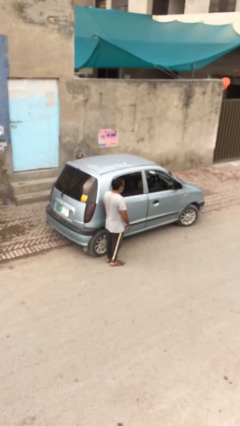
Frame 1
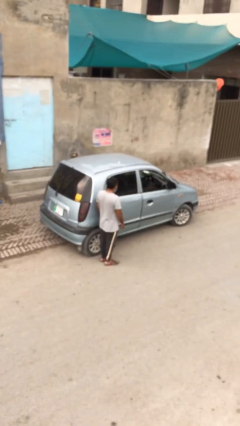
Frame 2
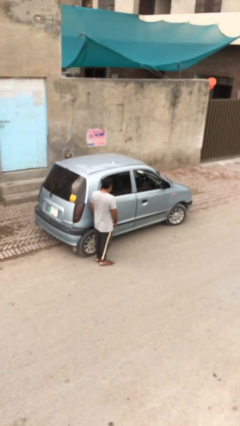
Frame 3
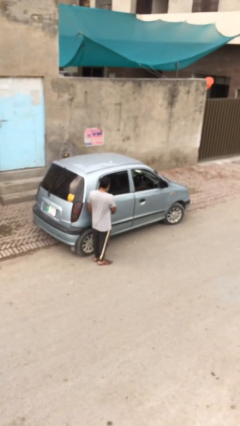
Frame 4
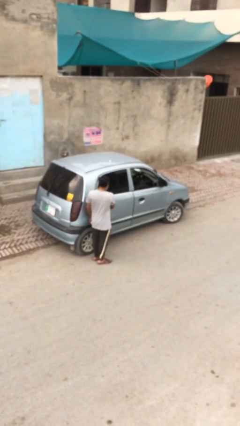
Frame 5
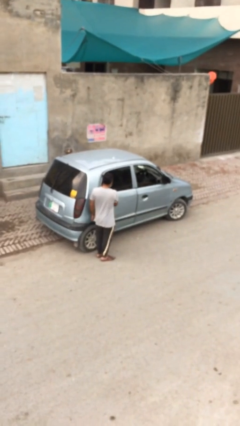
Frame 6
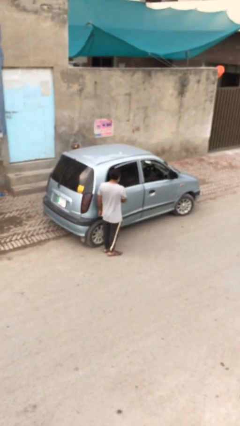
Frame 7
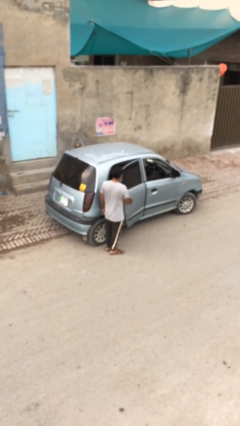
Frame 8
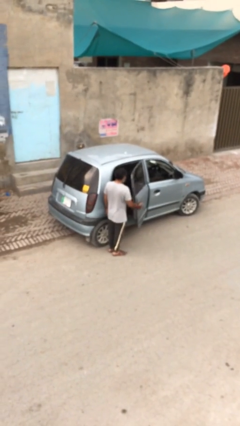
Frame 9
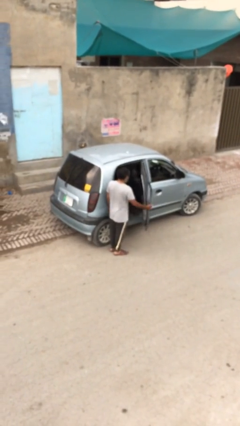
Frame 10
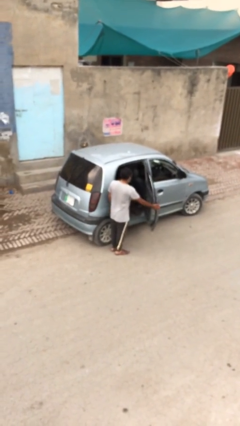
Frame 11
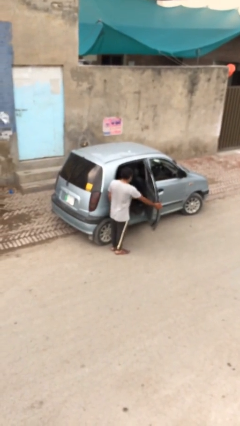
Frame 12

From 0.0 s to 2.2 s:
person opens car door

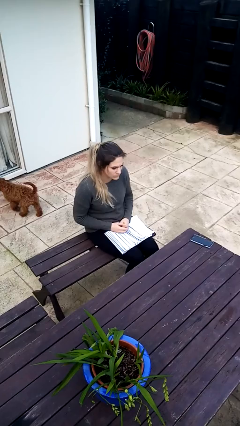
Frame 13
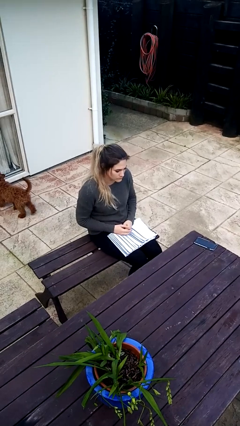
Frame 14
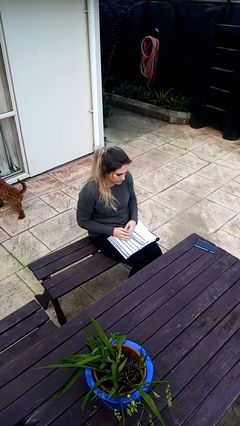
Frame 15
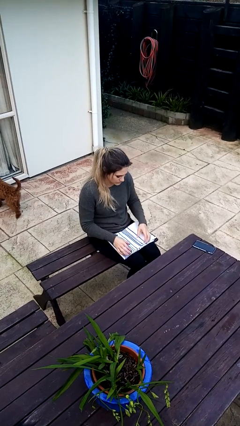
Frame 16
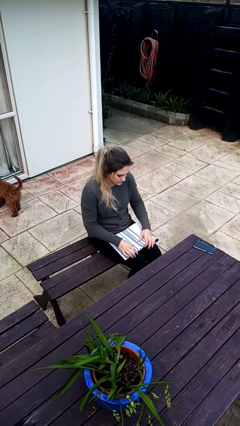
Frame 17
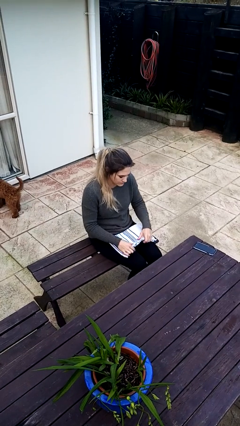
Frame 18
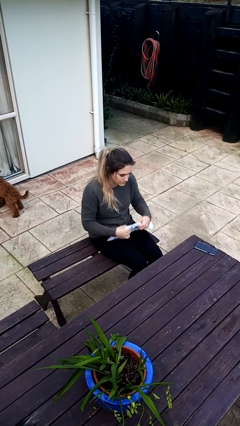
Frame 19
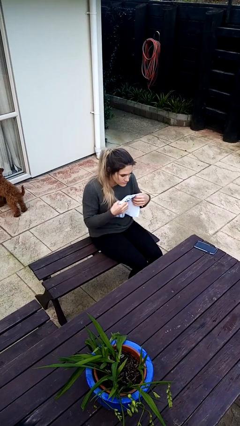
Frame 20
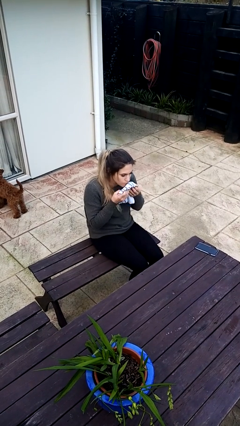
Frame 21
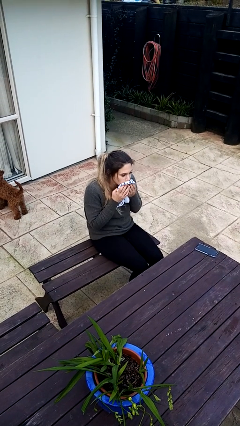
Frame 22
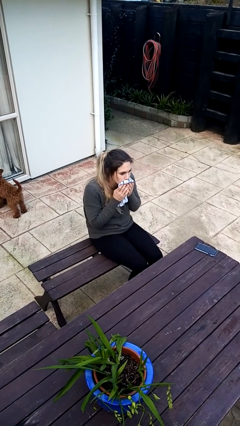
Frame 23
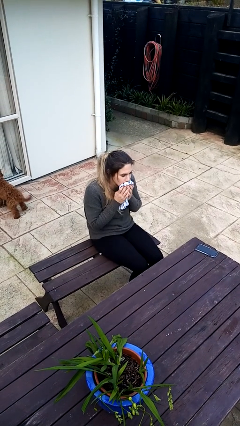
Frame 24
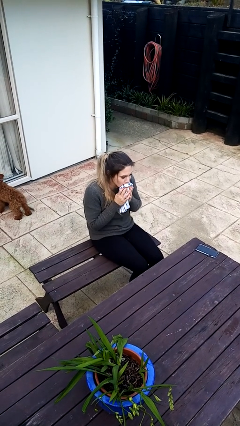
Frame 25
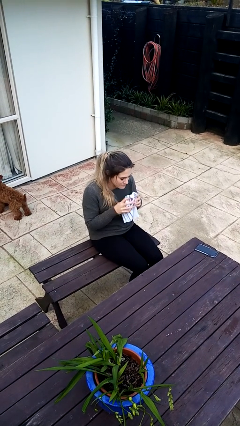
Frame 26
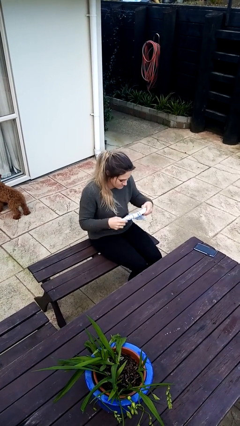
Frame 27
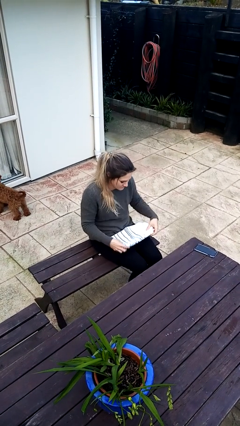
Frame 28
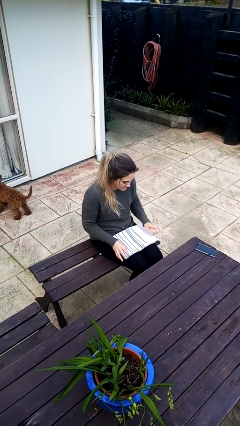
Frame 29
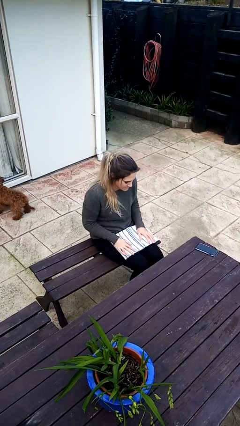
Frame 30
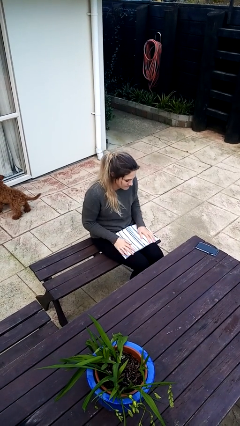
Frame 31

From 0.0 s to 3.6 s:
person wipes mouth with napkin

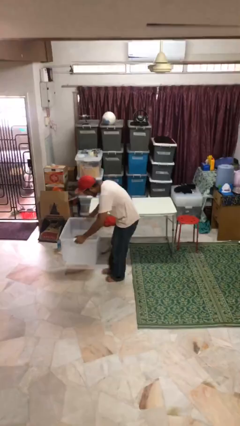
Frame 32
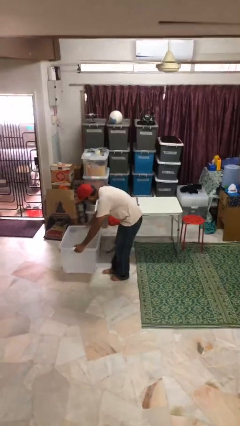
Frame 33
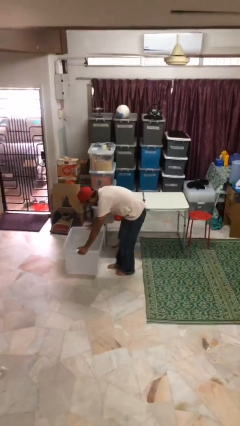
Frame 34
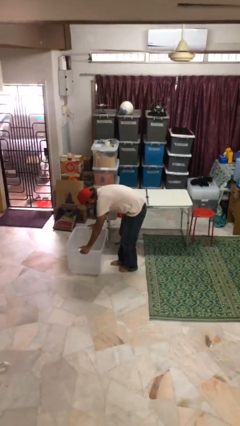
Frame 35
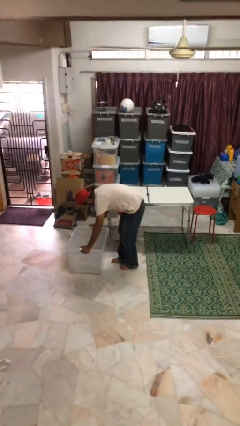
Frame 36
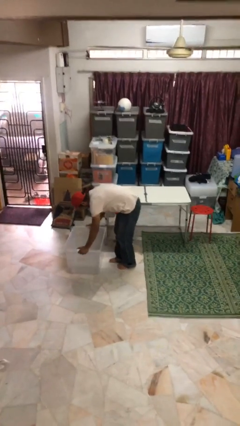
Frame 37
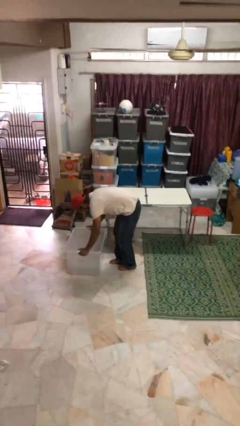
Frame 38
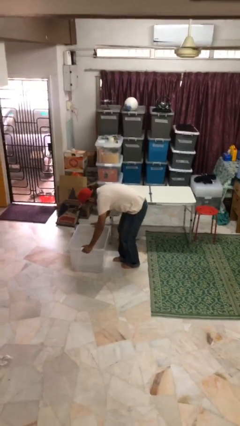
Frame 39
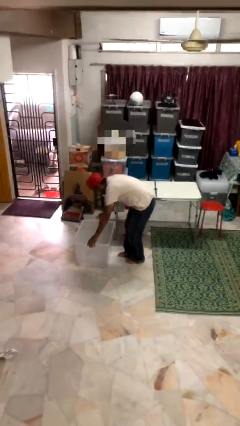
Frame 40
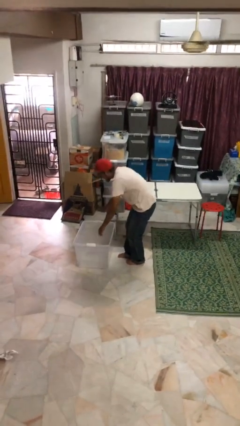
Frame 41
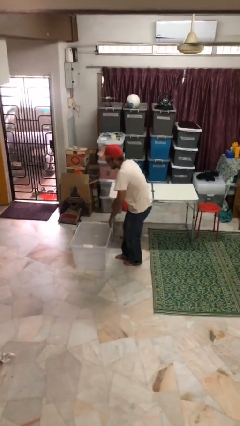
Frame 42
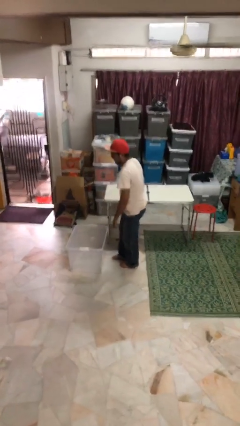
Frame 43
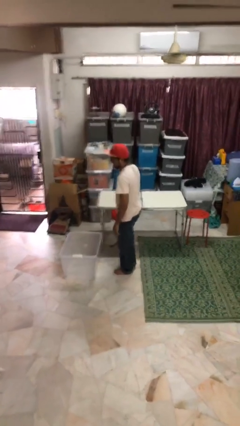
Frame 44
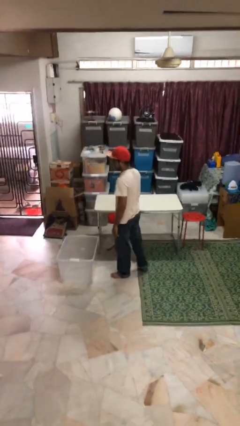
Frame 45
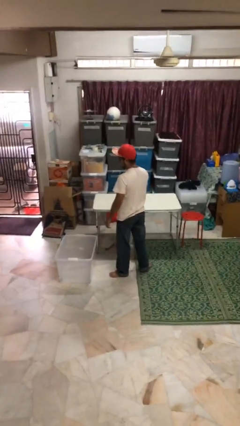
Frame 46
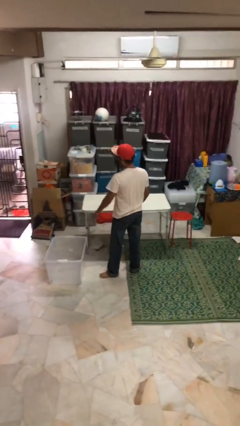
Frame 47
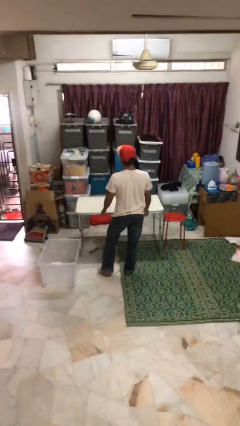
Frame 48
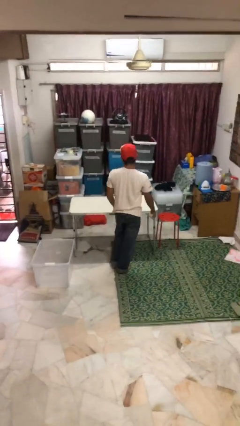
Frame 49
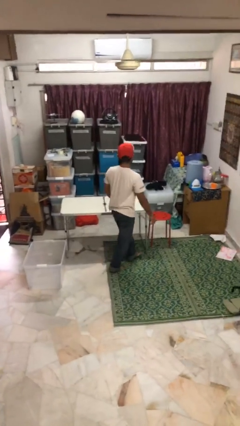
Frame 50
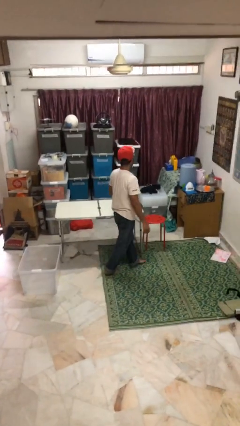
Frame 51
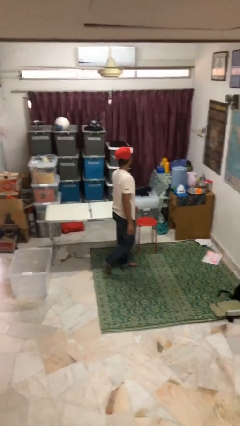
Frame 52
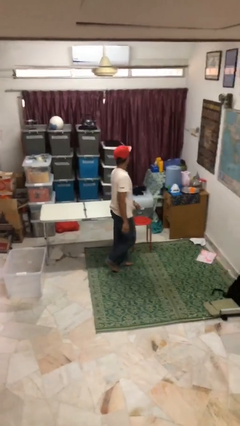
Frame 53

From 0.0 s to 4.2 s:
person puts down object on floor

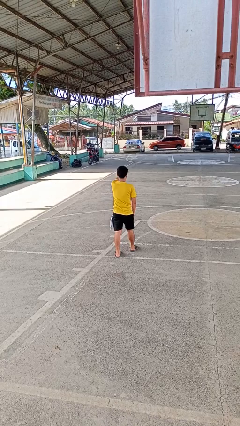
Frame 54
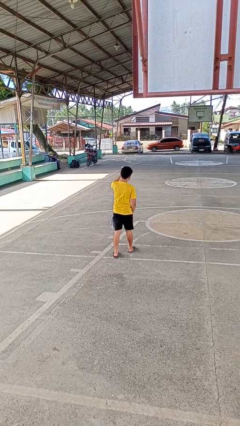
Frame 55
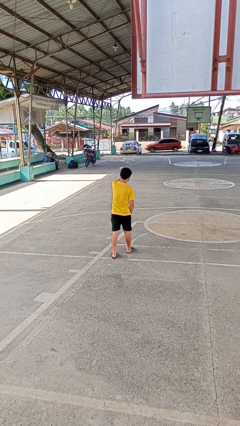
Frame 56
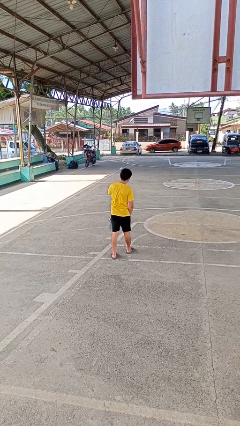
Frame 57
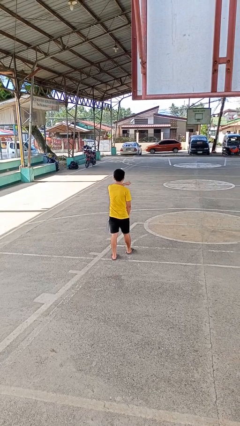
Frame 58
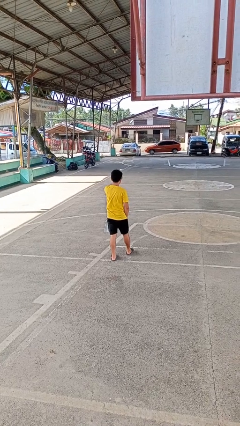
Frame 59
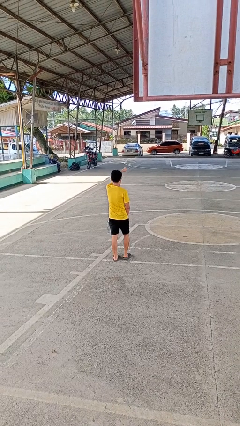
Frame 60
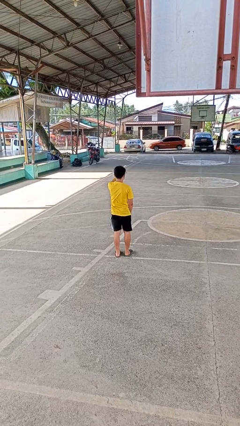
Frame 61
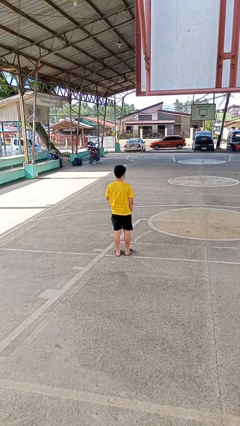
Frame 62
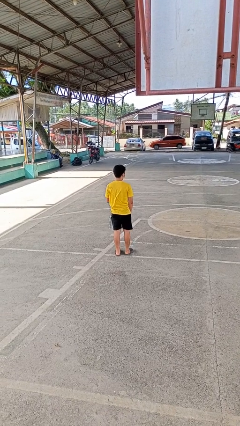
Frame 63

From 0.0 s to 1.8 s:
person punches

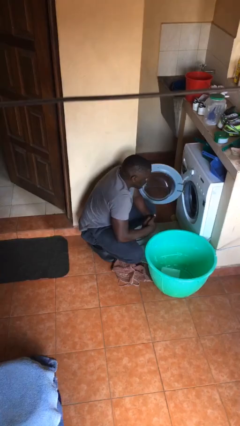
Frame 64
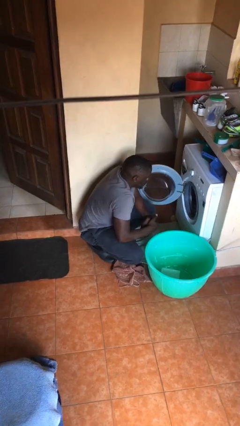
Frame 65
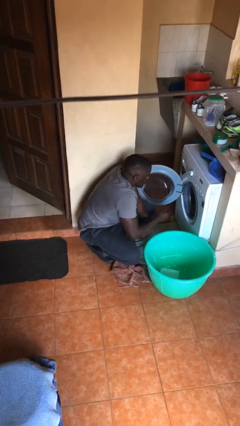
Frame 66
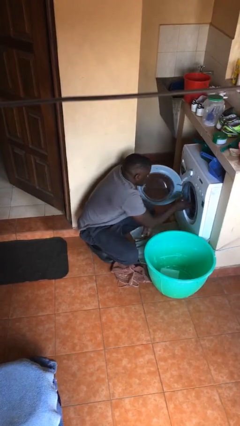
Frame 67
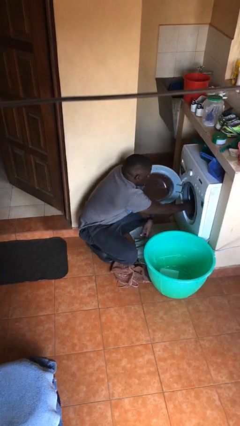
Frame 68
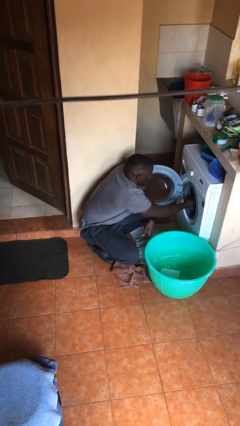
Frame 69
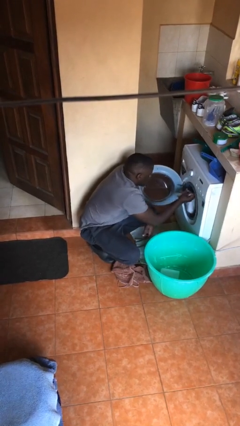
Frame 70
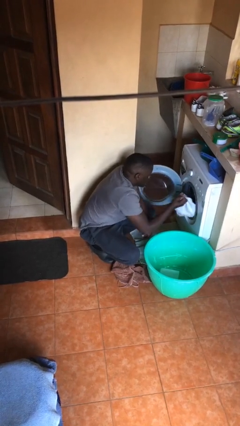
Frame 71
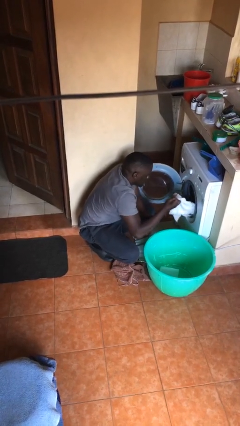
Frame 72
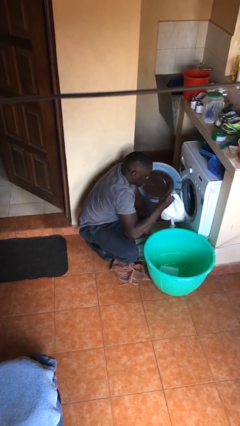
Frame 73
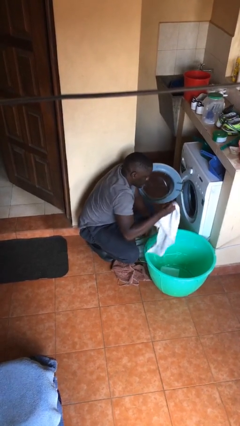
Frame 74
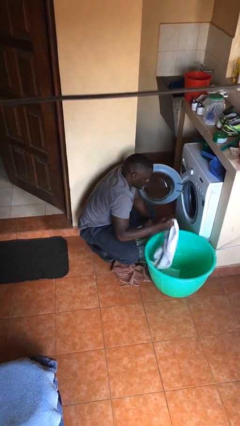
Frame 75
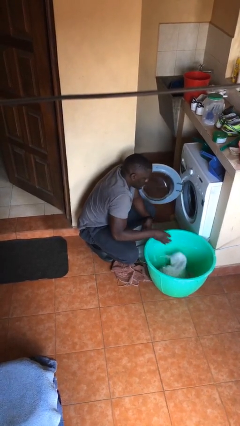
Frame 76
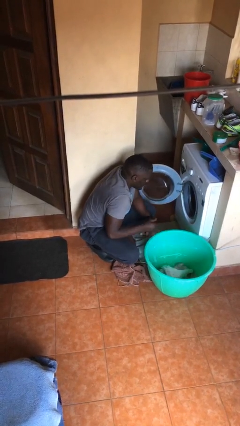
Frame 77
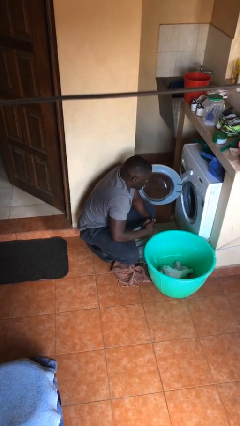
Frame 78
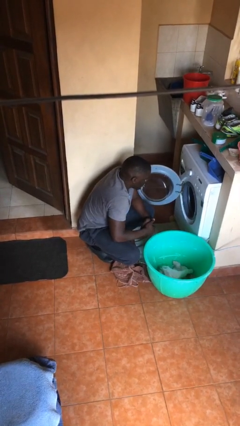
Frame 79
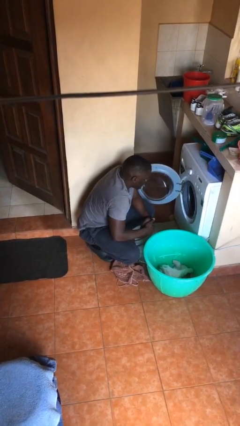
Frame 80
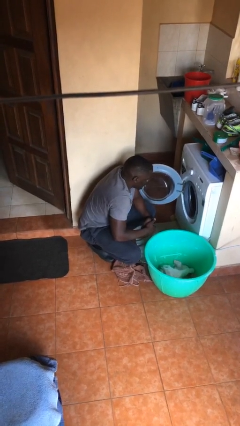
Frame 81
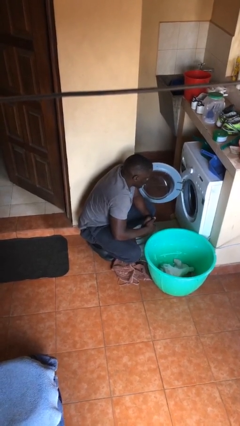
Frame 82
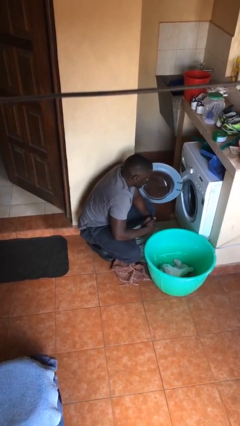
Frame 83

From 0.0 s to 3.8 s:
person unloads clotheswasher

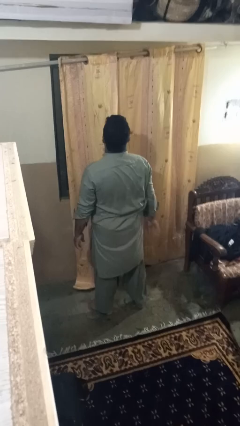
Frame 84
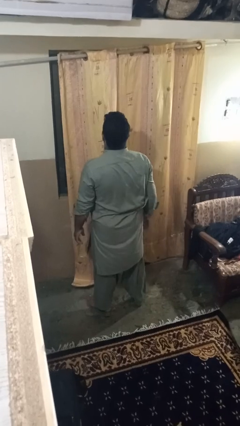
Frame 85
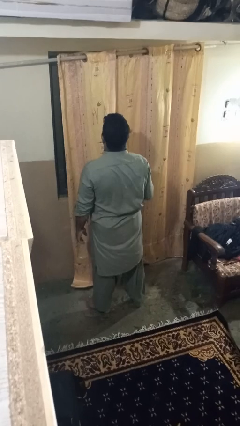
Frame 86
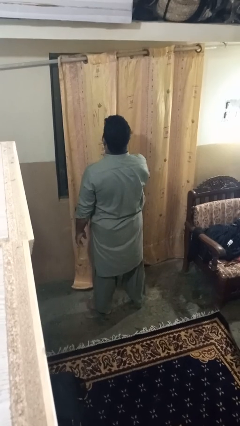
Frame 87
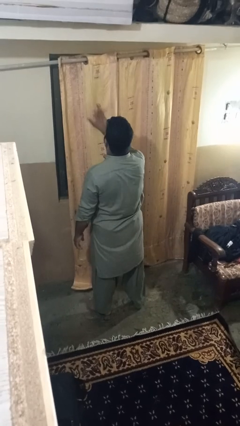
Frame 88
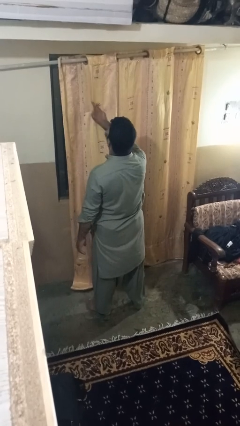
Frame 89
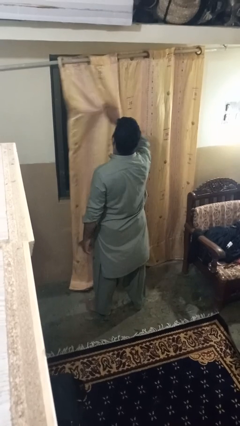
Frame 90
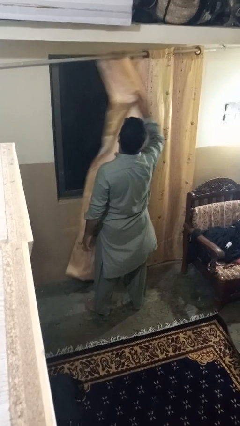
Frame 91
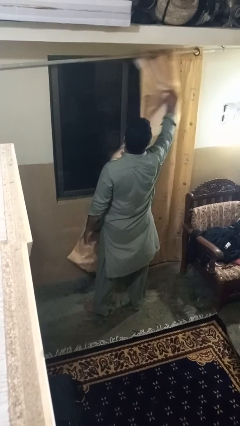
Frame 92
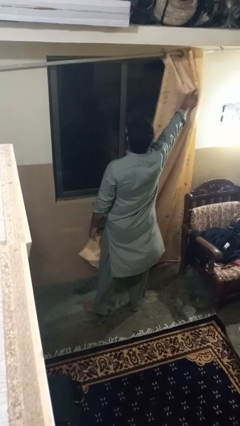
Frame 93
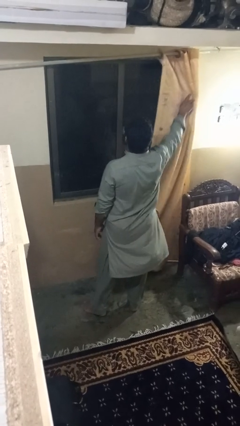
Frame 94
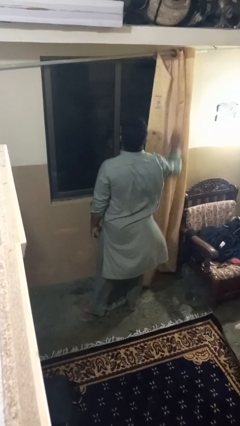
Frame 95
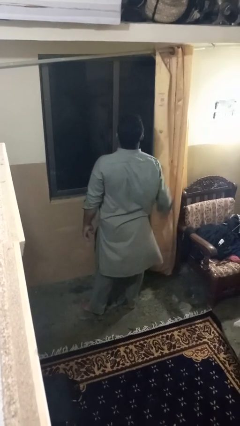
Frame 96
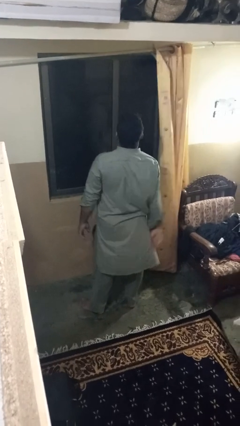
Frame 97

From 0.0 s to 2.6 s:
person opens curtains
